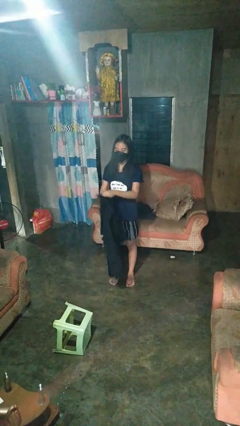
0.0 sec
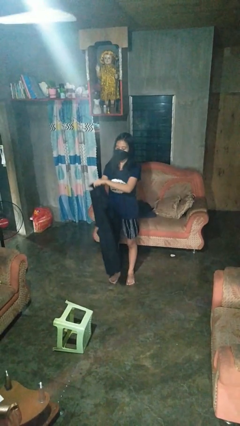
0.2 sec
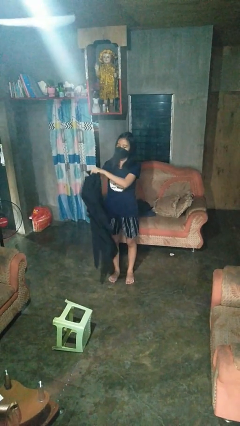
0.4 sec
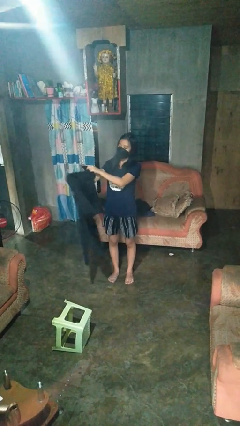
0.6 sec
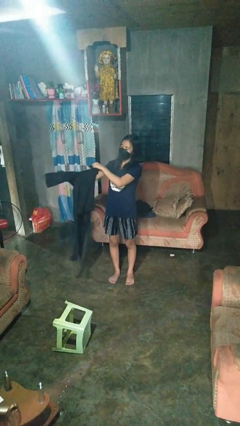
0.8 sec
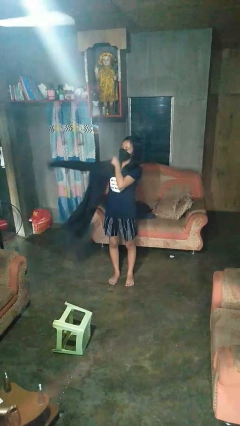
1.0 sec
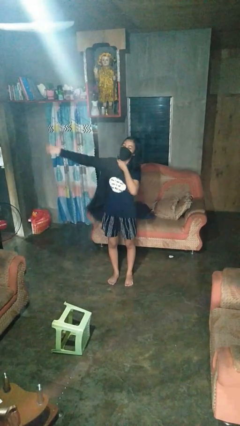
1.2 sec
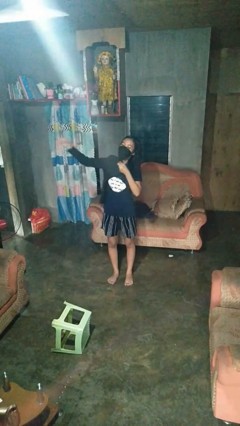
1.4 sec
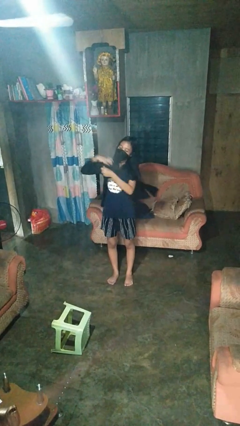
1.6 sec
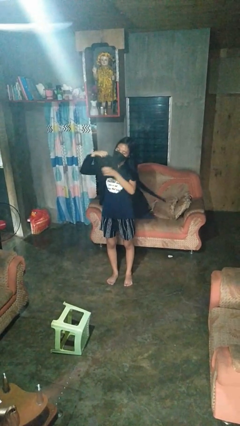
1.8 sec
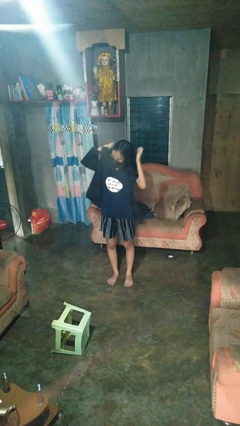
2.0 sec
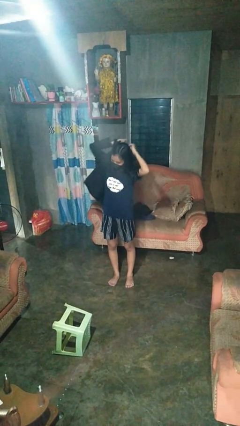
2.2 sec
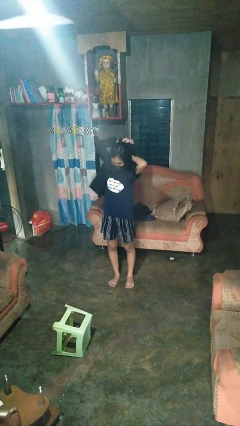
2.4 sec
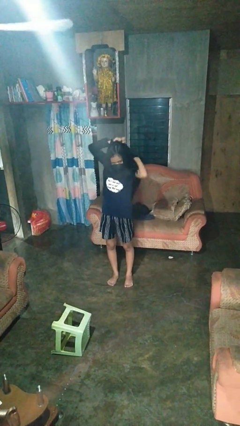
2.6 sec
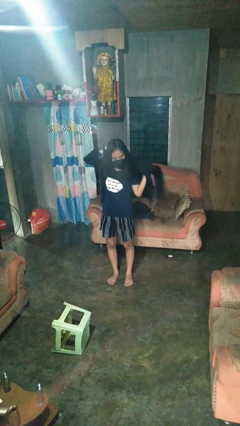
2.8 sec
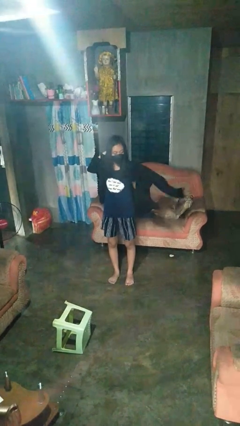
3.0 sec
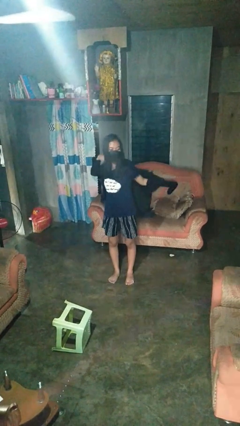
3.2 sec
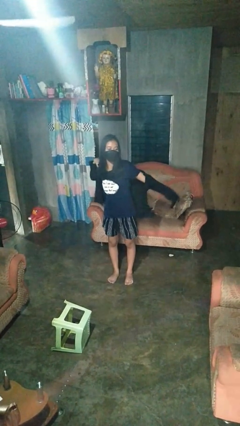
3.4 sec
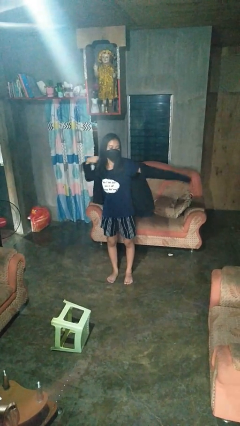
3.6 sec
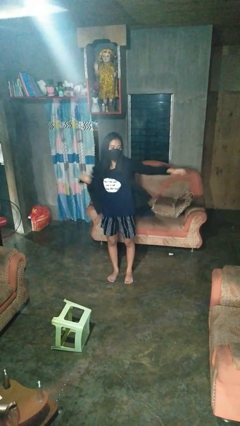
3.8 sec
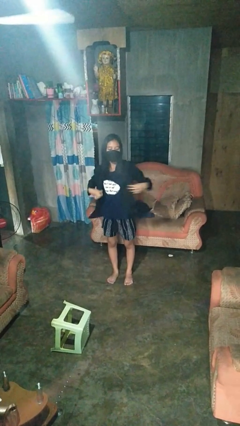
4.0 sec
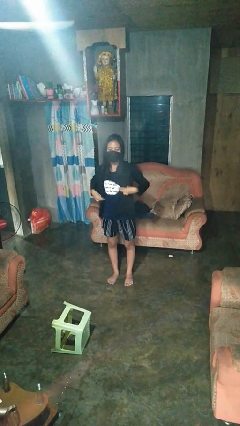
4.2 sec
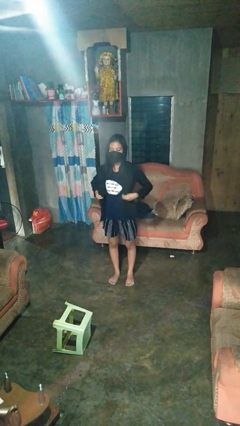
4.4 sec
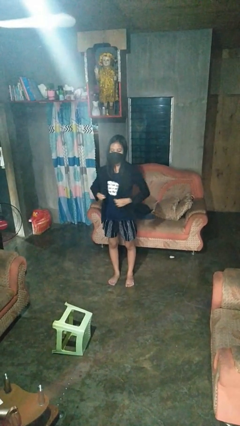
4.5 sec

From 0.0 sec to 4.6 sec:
person puts on shirt

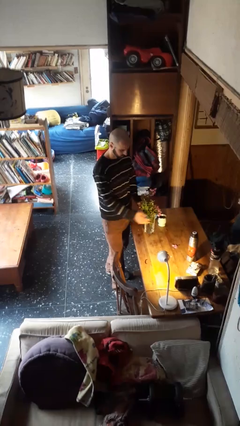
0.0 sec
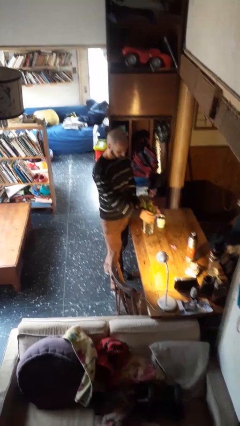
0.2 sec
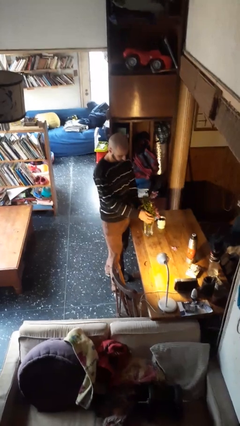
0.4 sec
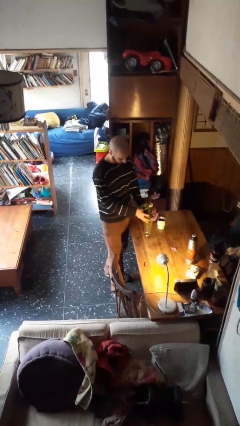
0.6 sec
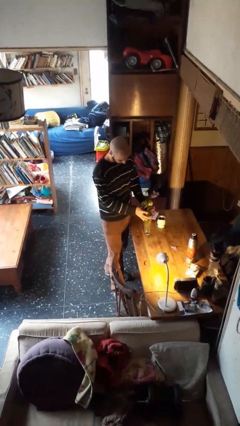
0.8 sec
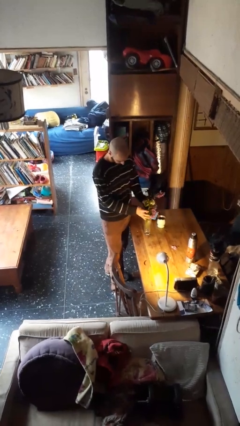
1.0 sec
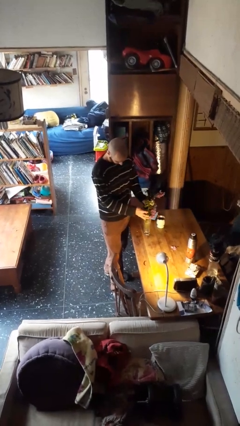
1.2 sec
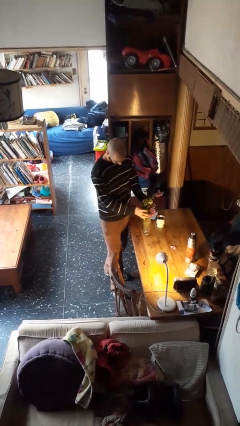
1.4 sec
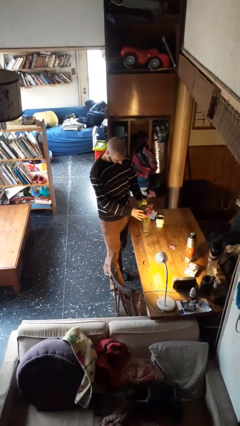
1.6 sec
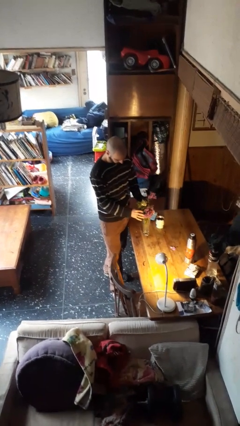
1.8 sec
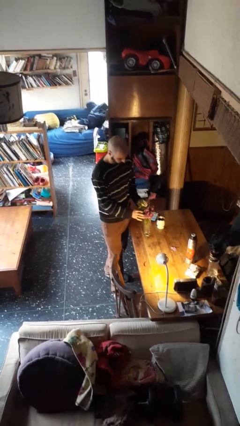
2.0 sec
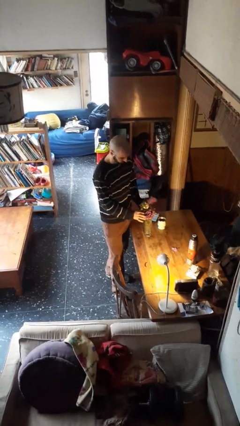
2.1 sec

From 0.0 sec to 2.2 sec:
person arranges flowers in vase

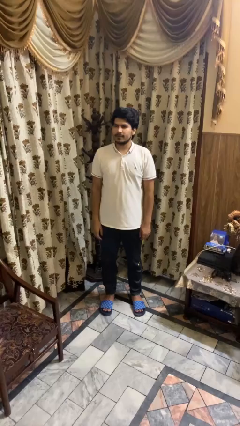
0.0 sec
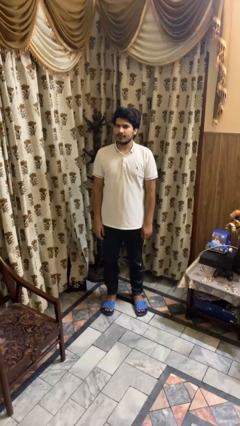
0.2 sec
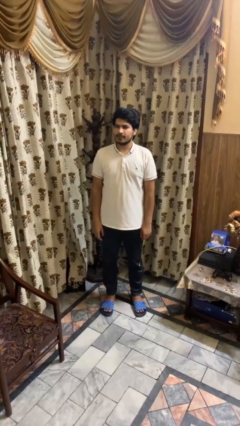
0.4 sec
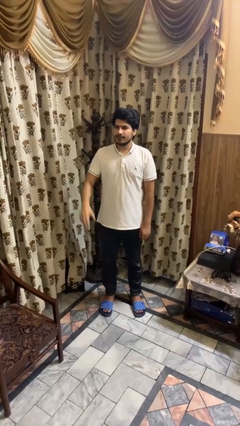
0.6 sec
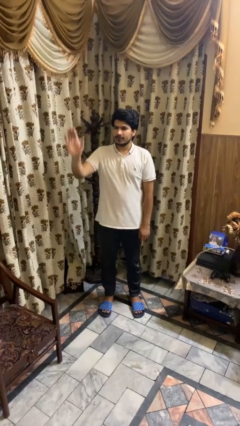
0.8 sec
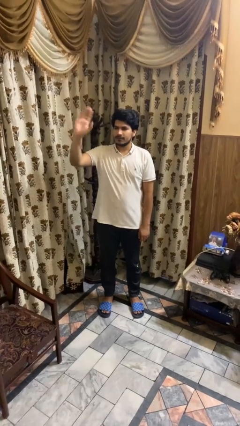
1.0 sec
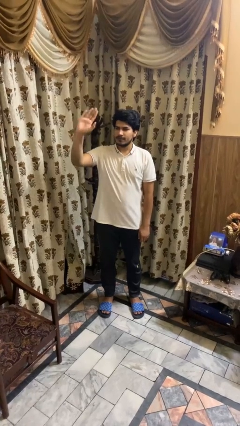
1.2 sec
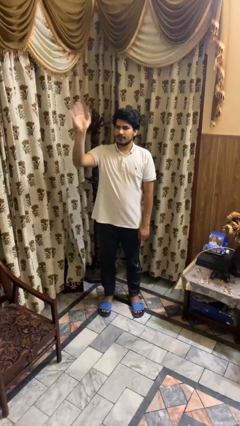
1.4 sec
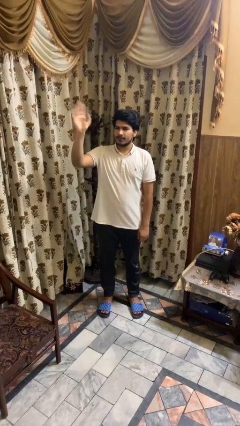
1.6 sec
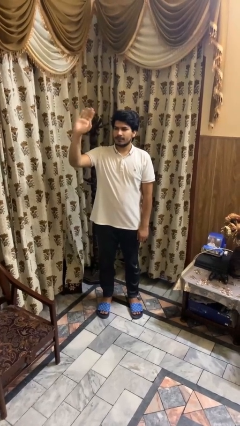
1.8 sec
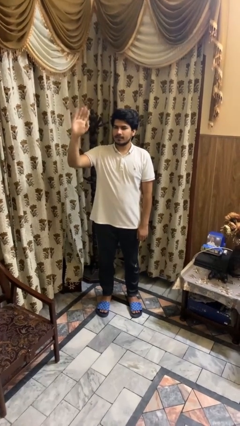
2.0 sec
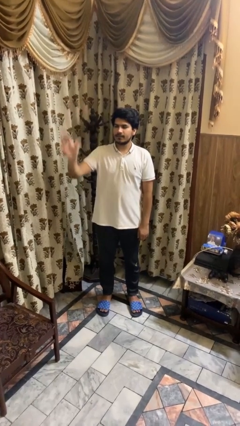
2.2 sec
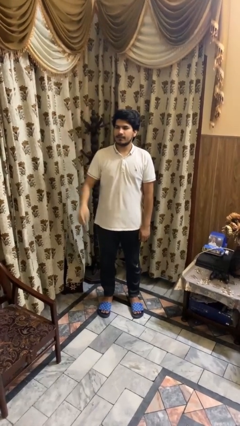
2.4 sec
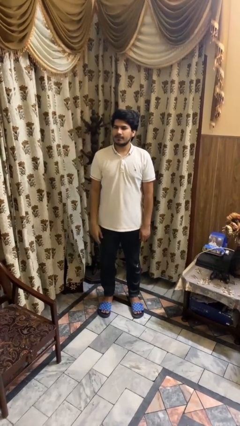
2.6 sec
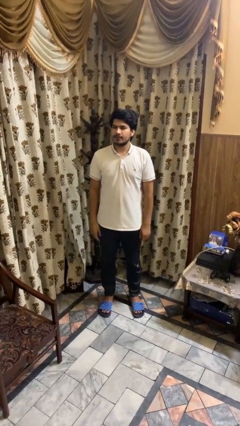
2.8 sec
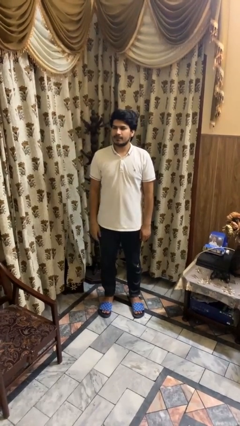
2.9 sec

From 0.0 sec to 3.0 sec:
person waves at person

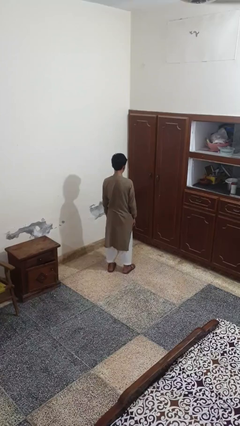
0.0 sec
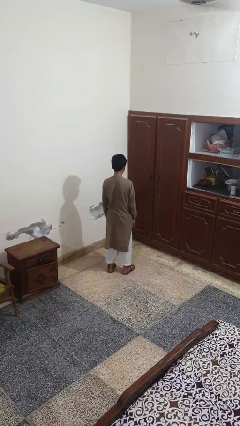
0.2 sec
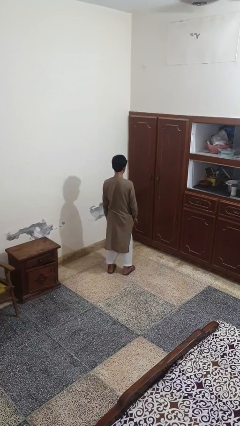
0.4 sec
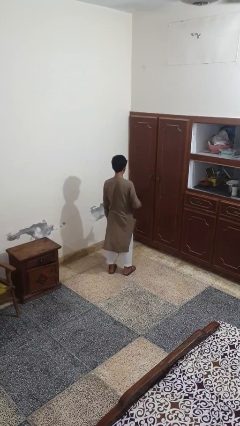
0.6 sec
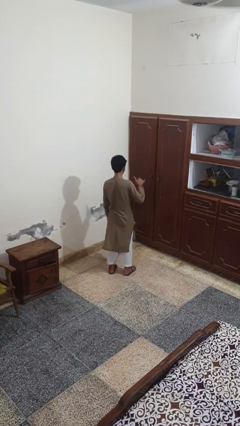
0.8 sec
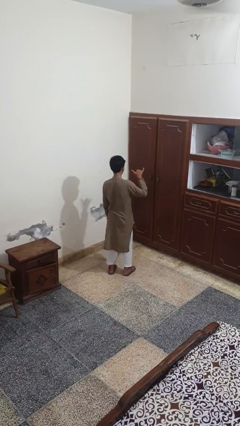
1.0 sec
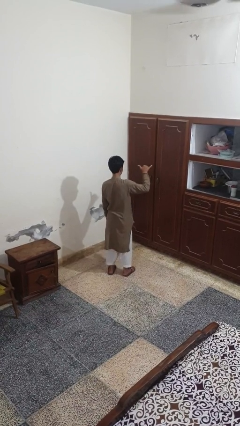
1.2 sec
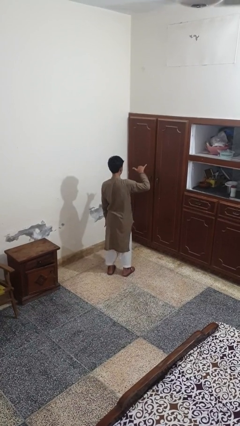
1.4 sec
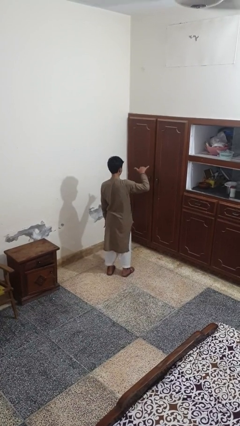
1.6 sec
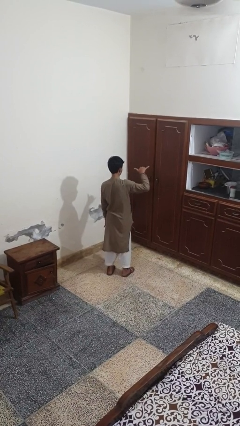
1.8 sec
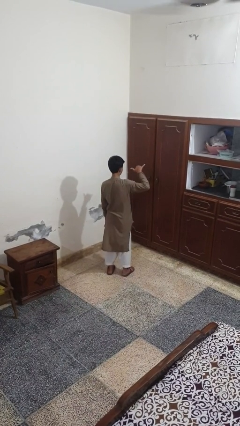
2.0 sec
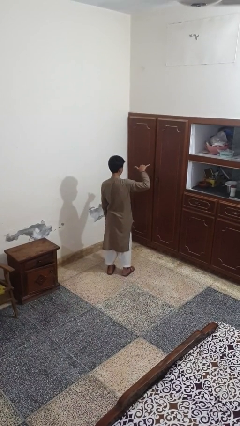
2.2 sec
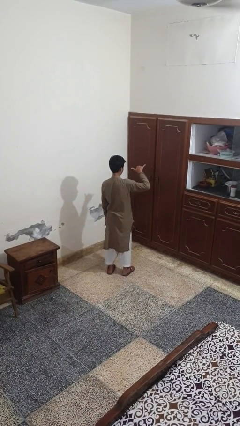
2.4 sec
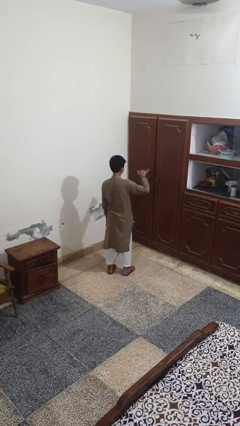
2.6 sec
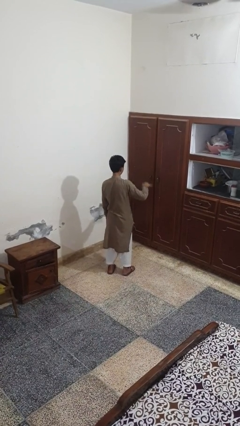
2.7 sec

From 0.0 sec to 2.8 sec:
person gestures hang loose

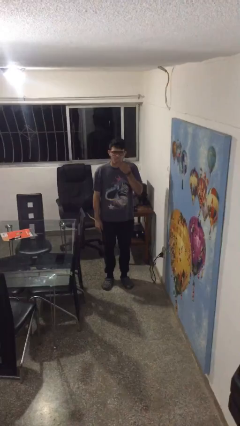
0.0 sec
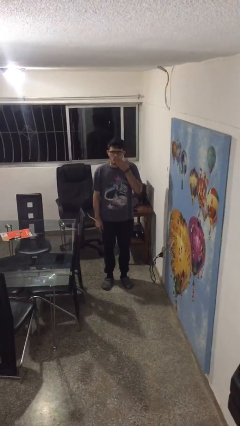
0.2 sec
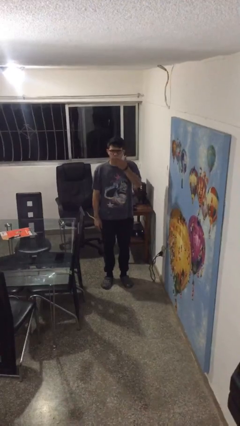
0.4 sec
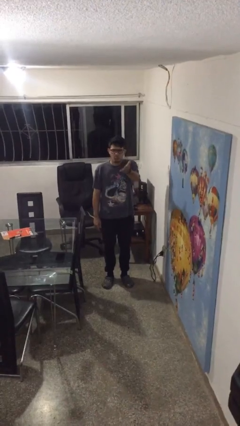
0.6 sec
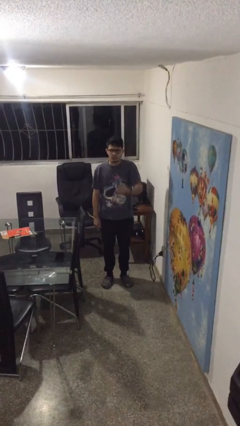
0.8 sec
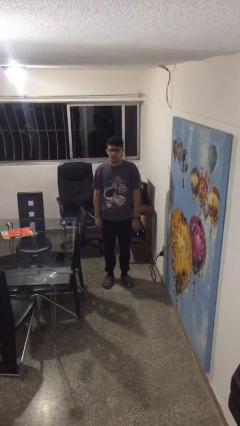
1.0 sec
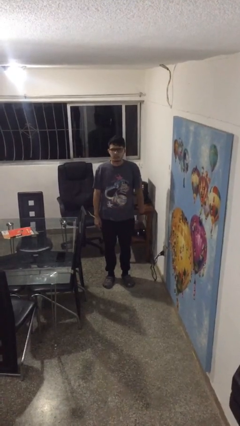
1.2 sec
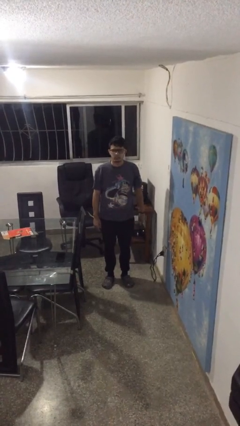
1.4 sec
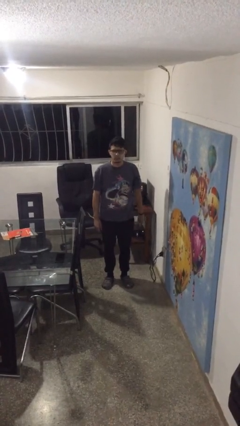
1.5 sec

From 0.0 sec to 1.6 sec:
person gestures blow kiss

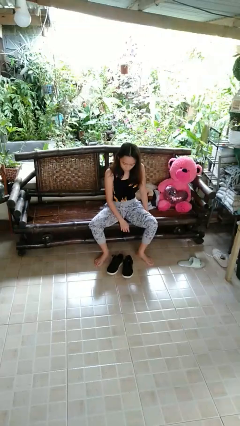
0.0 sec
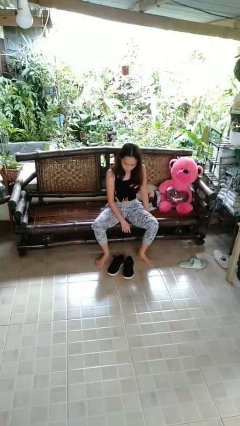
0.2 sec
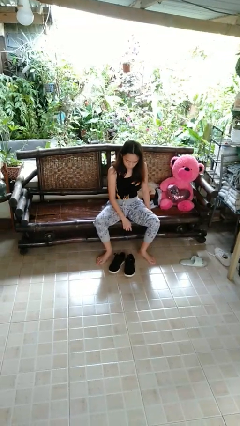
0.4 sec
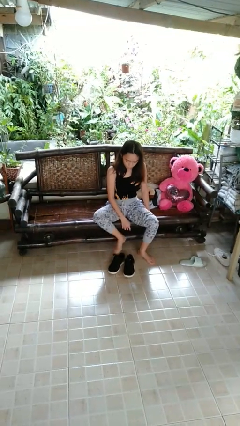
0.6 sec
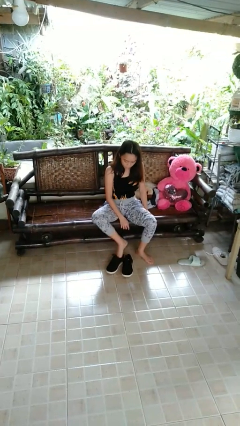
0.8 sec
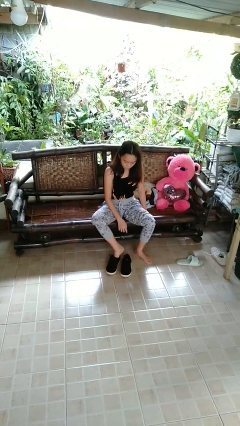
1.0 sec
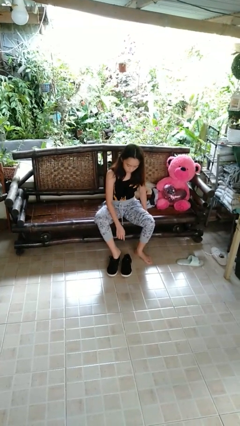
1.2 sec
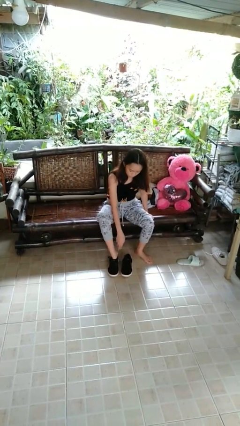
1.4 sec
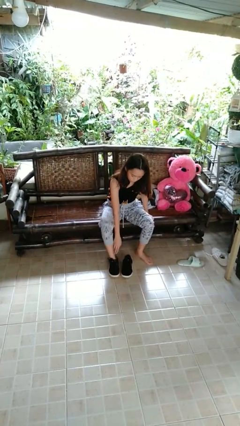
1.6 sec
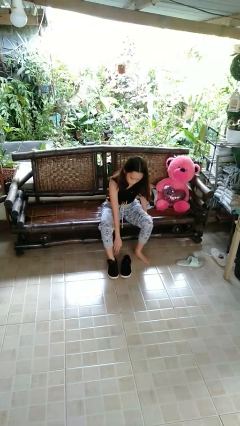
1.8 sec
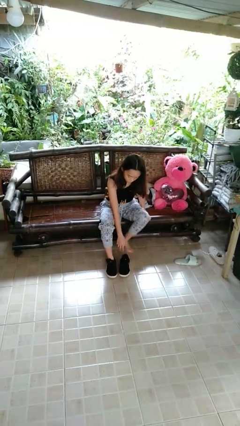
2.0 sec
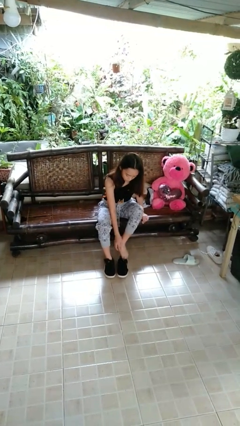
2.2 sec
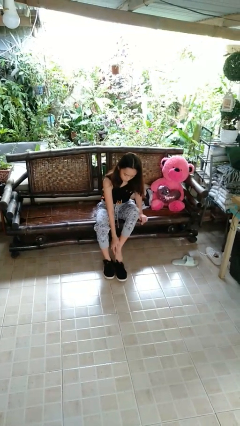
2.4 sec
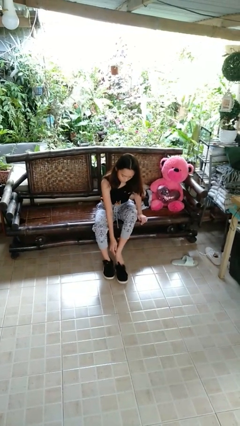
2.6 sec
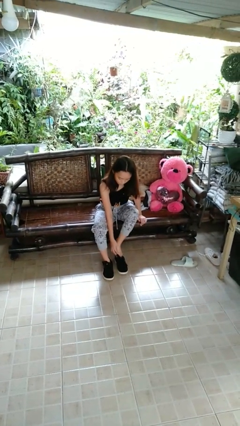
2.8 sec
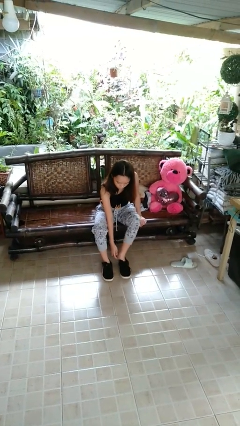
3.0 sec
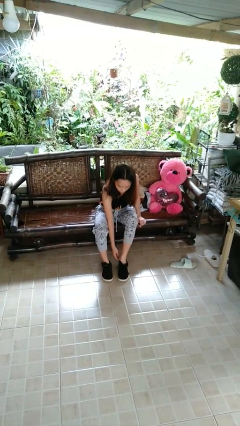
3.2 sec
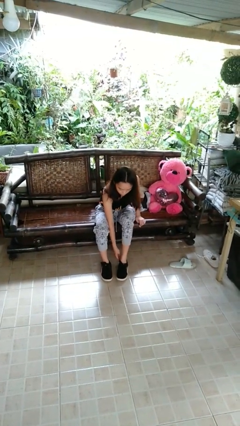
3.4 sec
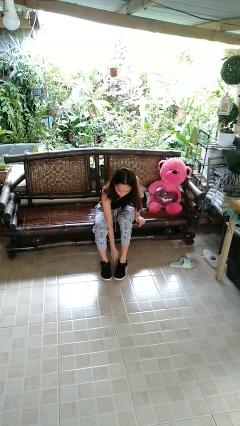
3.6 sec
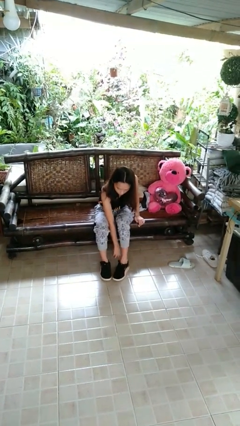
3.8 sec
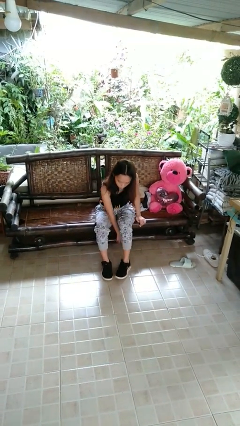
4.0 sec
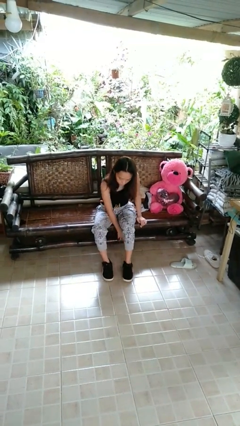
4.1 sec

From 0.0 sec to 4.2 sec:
person puts on shoes
